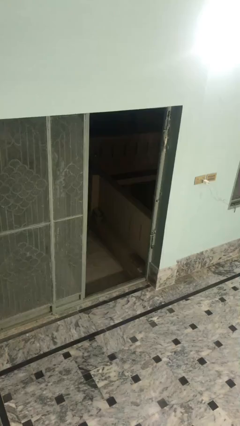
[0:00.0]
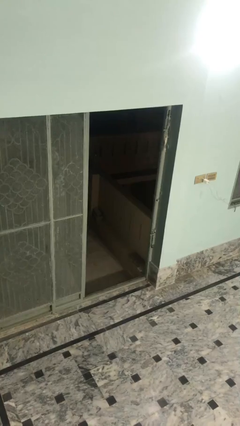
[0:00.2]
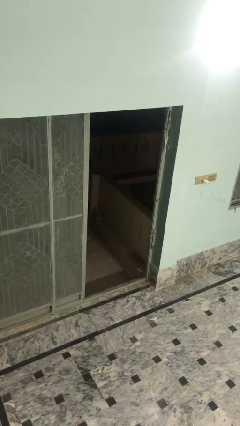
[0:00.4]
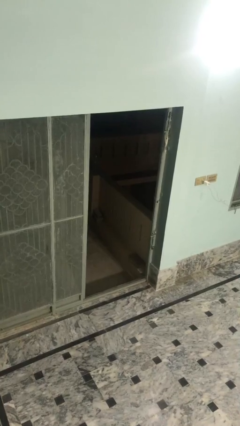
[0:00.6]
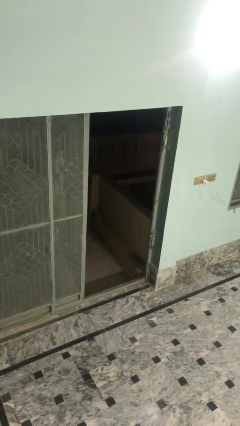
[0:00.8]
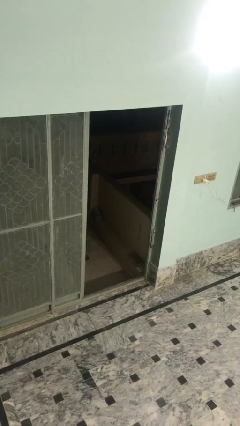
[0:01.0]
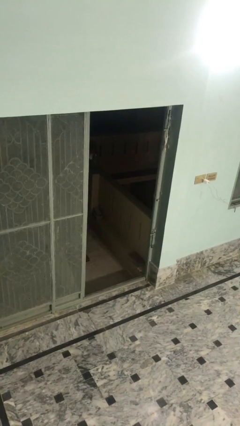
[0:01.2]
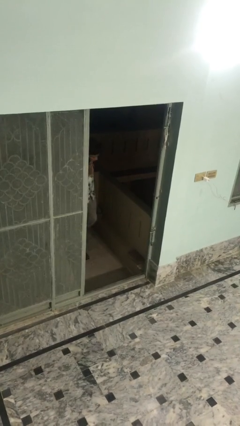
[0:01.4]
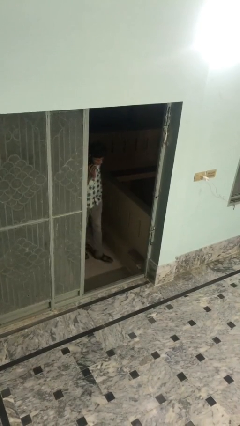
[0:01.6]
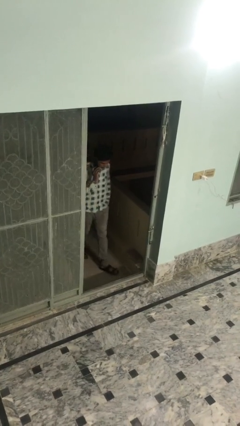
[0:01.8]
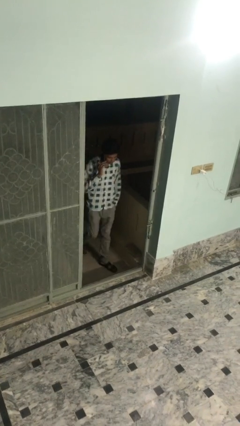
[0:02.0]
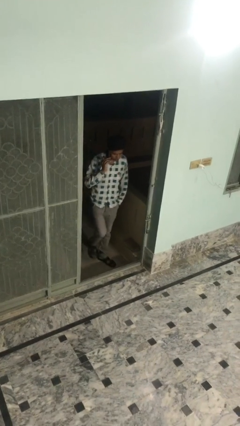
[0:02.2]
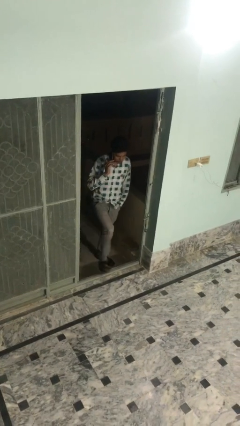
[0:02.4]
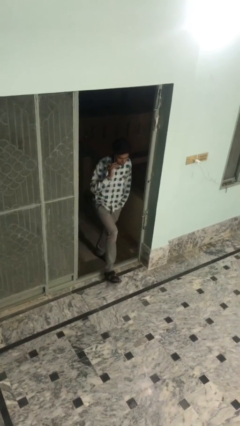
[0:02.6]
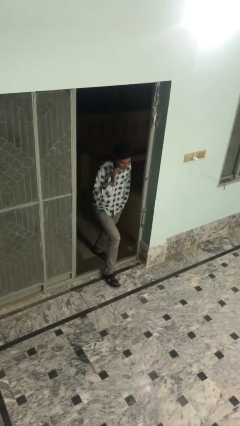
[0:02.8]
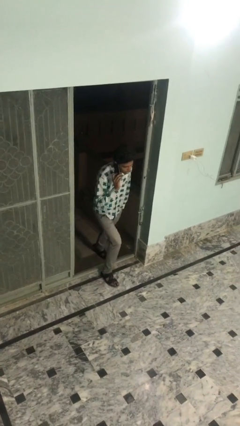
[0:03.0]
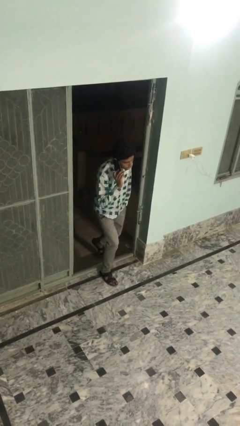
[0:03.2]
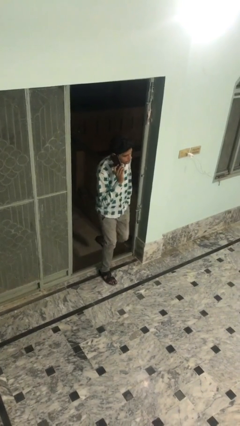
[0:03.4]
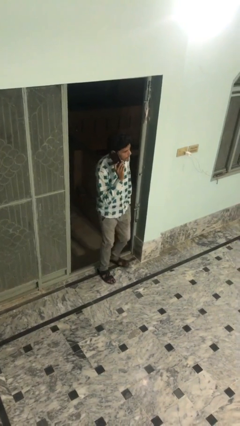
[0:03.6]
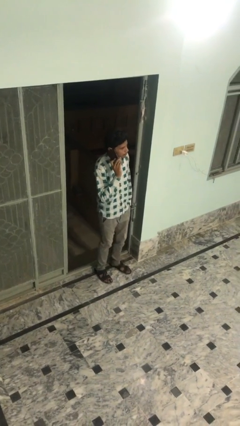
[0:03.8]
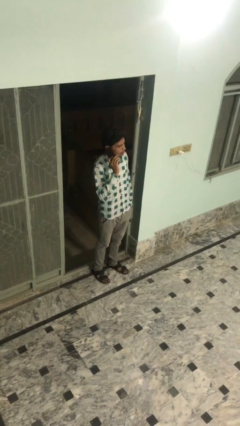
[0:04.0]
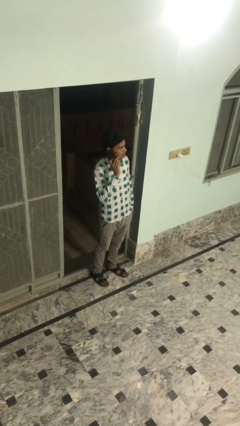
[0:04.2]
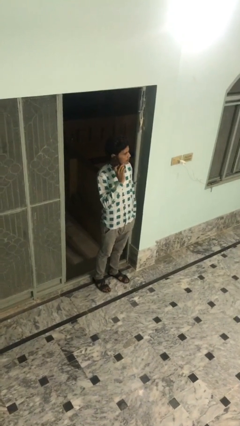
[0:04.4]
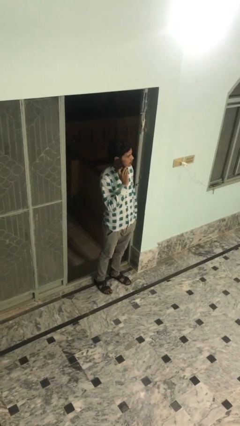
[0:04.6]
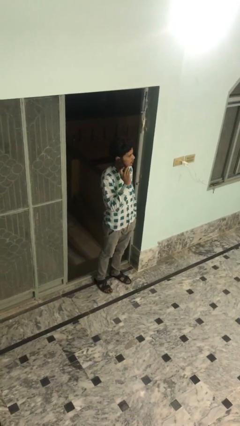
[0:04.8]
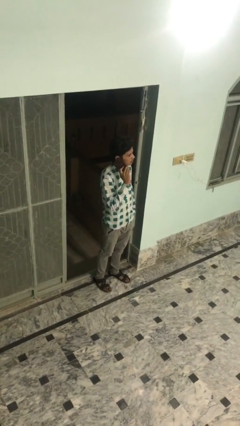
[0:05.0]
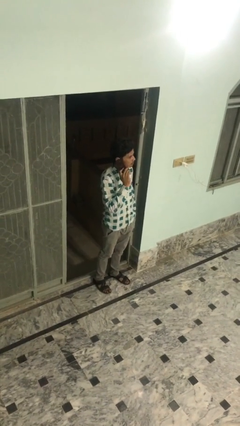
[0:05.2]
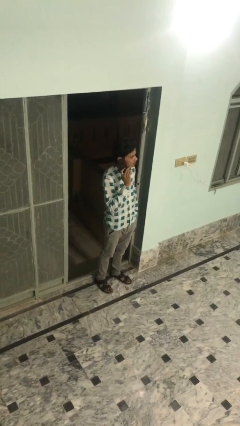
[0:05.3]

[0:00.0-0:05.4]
person enters scene through structure

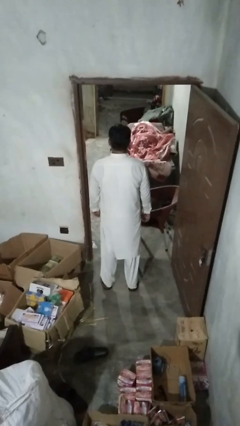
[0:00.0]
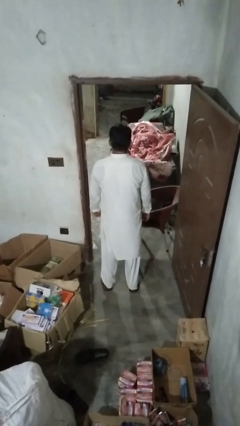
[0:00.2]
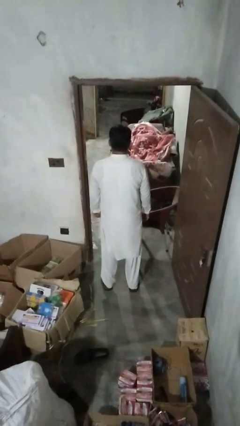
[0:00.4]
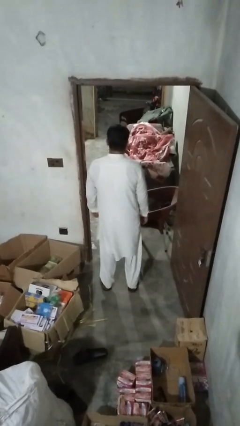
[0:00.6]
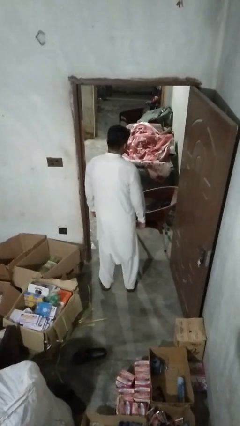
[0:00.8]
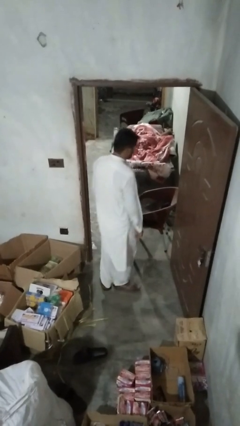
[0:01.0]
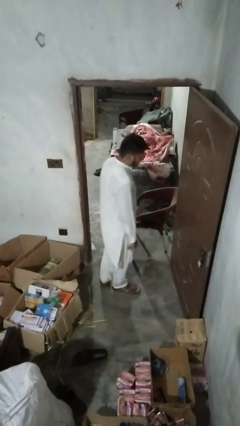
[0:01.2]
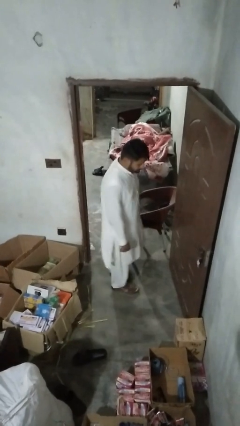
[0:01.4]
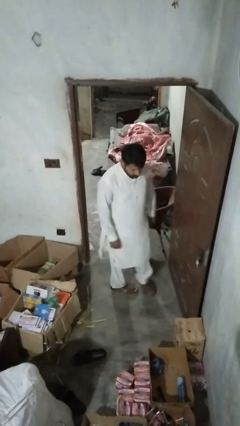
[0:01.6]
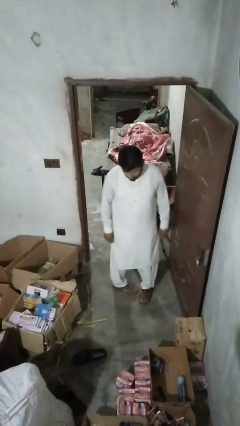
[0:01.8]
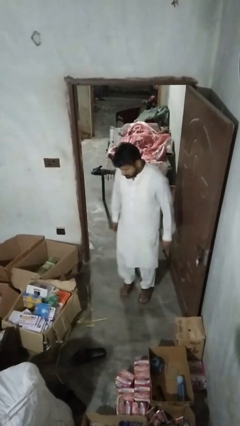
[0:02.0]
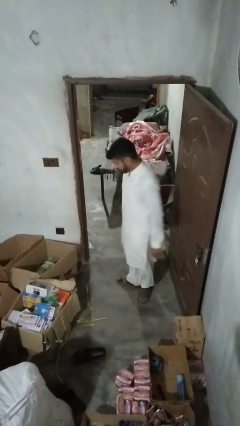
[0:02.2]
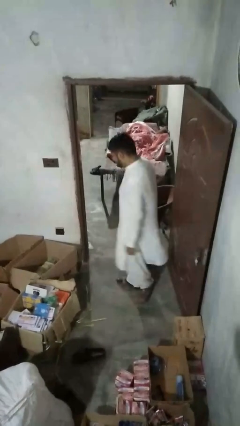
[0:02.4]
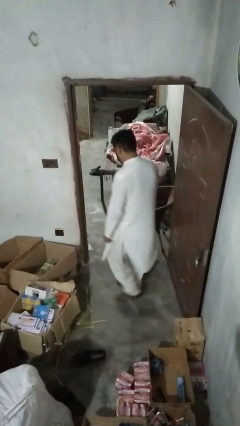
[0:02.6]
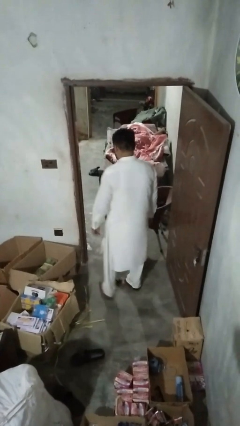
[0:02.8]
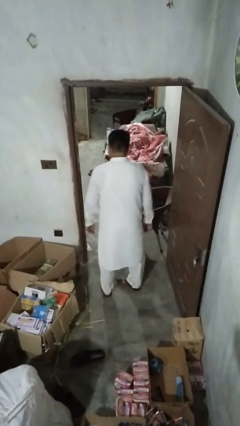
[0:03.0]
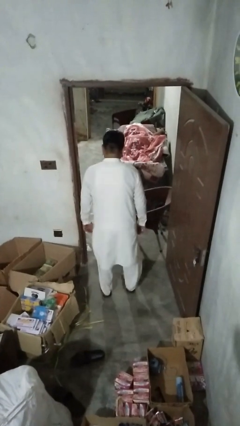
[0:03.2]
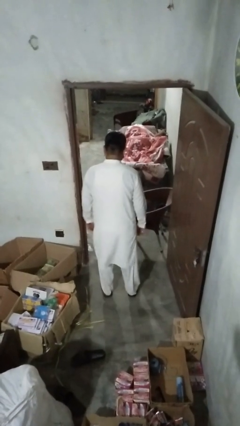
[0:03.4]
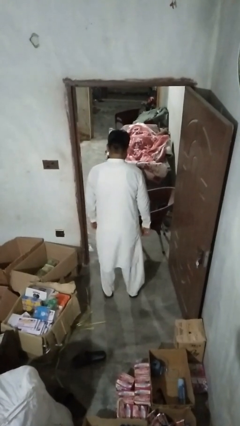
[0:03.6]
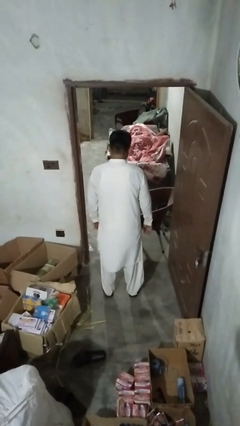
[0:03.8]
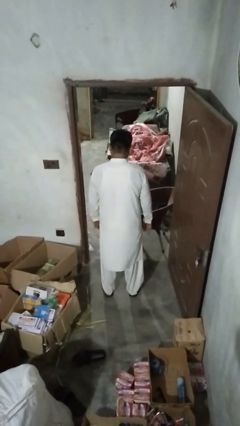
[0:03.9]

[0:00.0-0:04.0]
person twirls

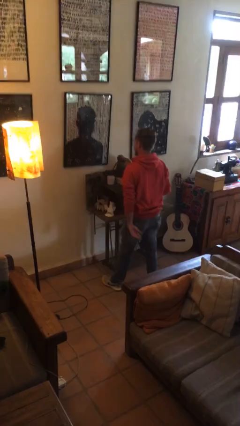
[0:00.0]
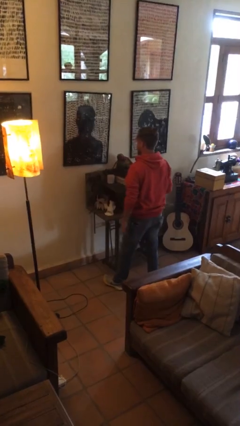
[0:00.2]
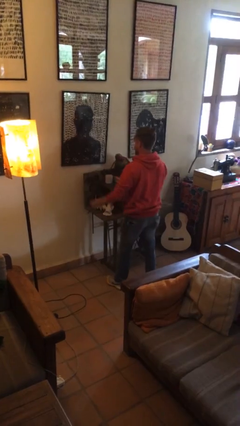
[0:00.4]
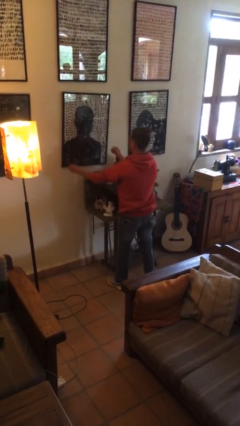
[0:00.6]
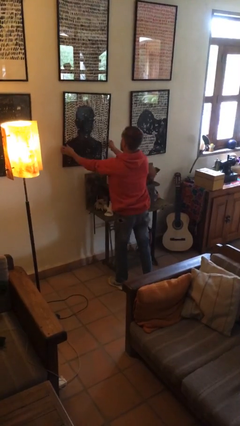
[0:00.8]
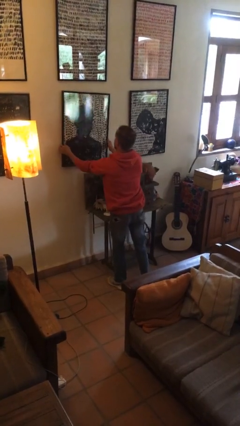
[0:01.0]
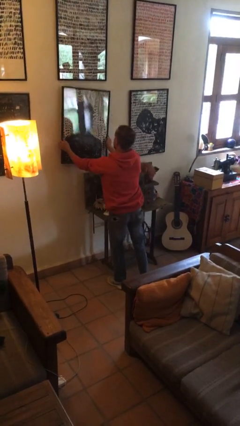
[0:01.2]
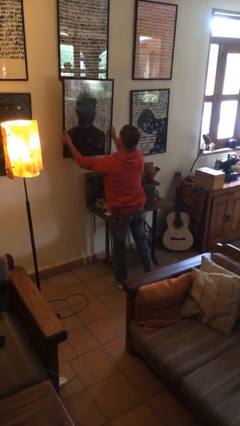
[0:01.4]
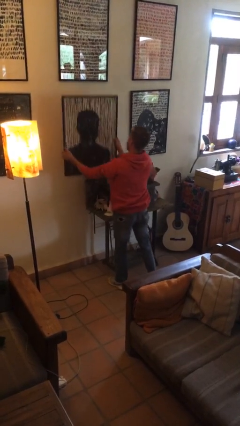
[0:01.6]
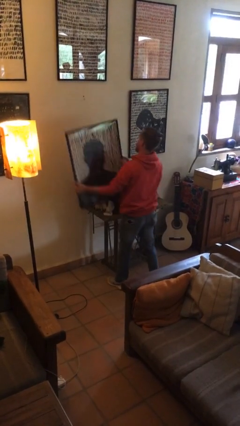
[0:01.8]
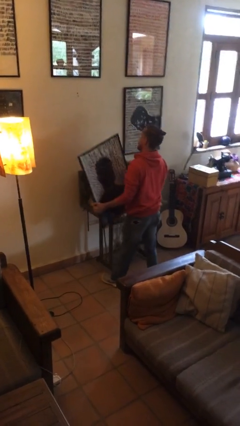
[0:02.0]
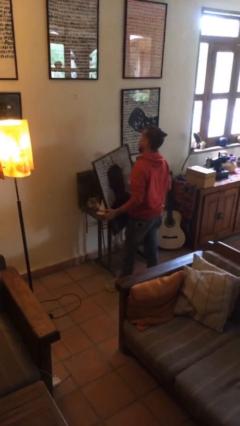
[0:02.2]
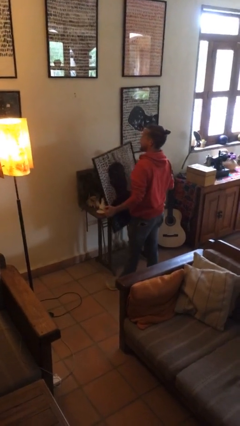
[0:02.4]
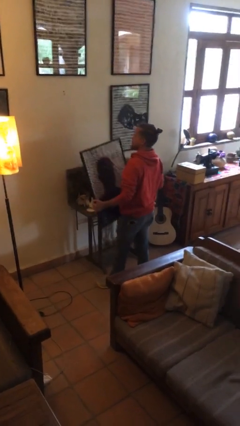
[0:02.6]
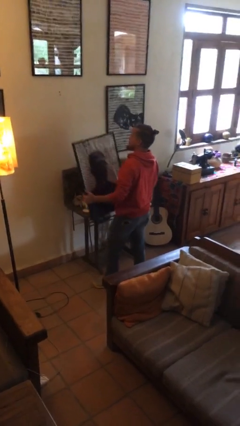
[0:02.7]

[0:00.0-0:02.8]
person takes down picture frame

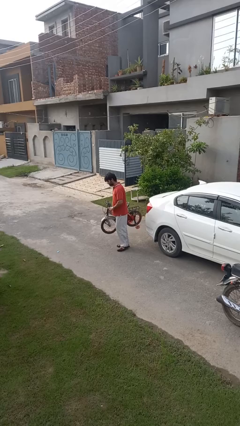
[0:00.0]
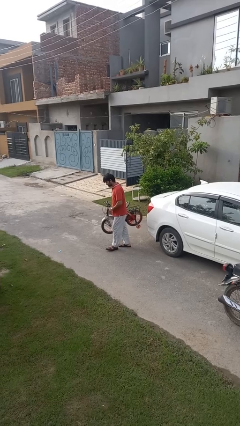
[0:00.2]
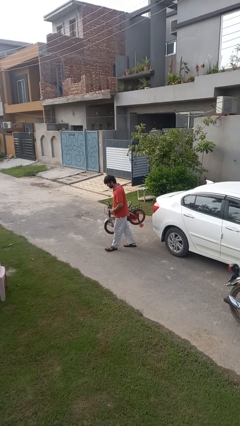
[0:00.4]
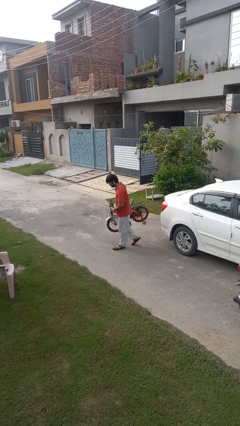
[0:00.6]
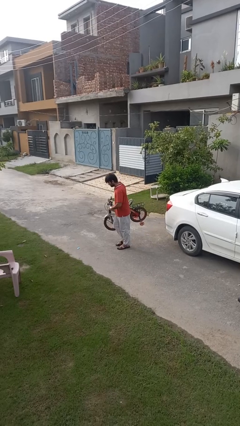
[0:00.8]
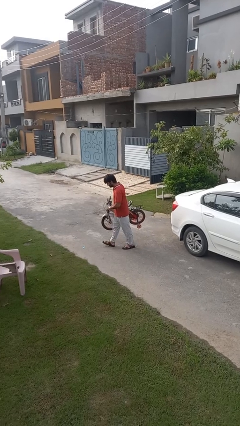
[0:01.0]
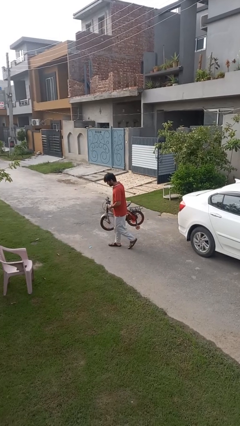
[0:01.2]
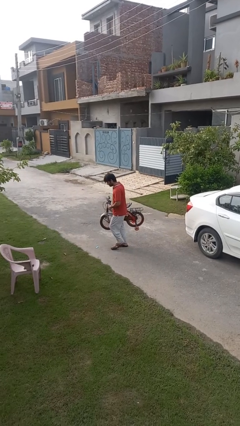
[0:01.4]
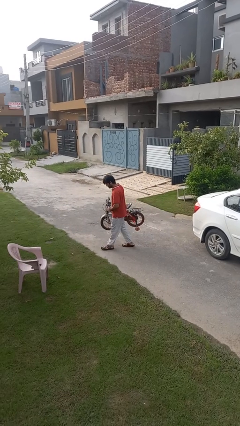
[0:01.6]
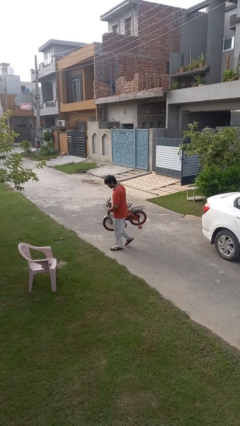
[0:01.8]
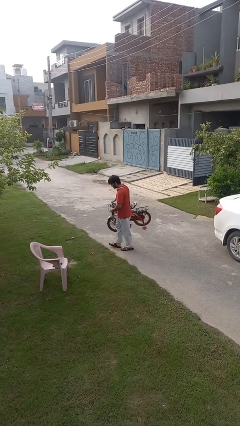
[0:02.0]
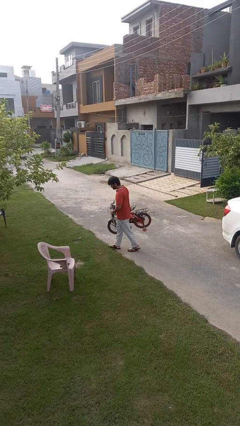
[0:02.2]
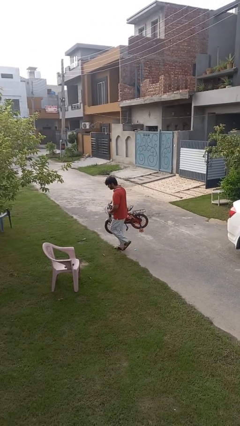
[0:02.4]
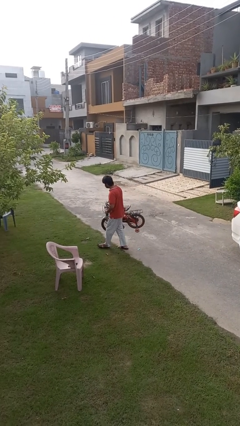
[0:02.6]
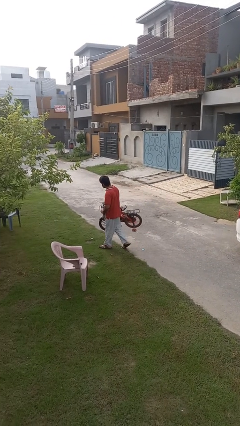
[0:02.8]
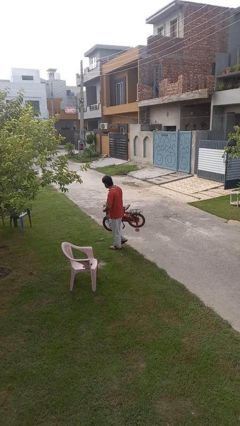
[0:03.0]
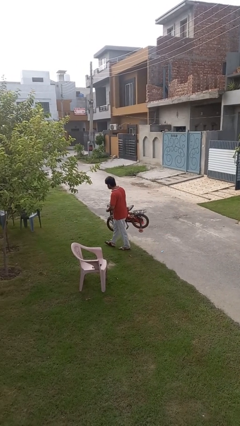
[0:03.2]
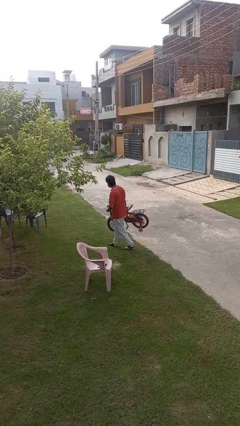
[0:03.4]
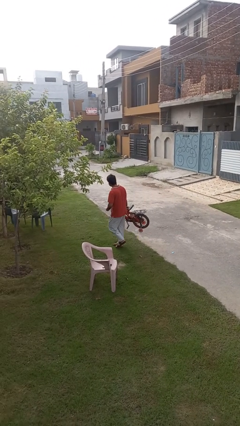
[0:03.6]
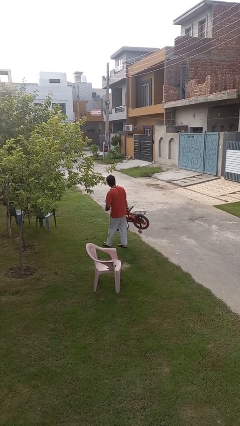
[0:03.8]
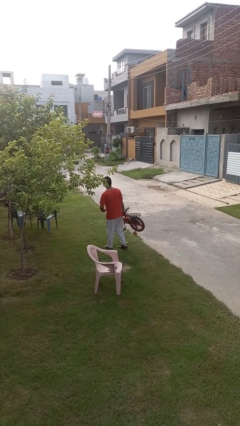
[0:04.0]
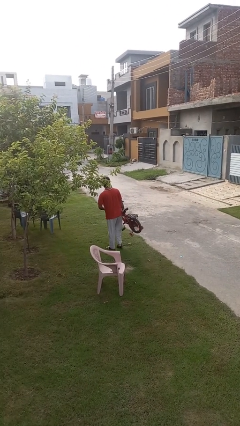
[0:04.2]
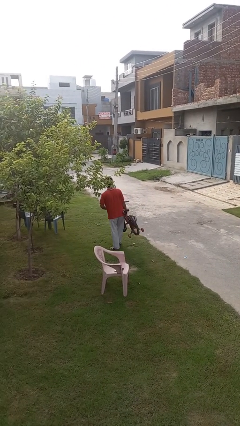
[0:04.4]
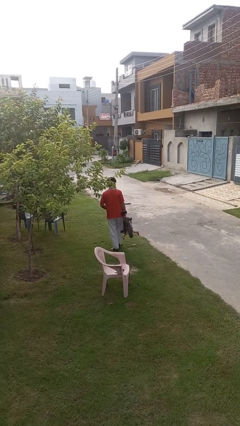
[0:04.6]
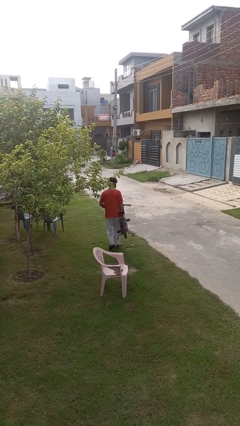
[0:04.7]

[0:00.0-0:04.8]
person carries bicycle

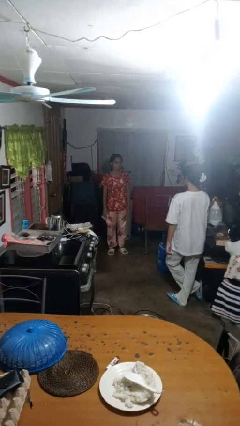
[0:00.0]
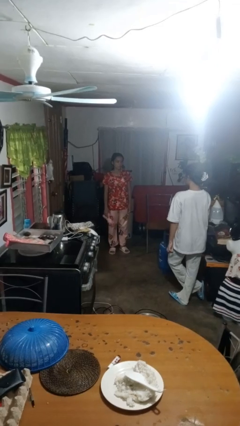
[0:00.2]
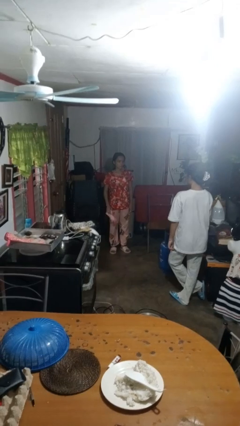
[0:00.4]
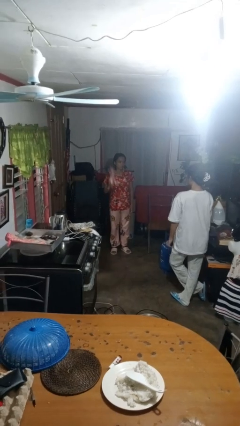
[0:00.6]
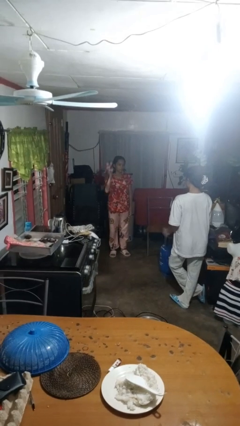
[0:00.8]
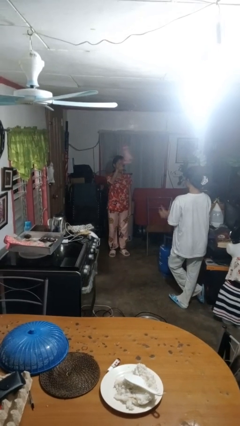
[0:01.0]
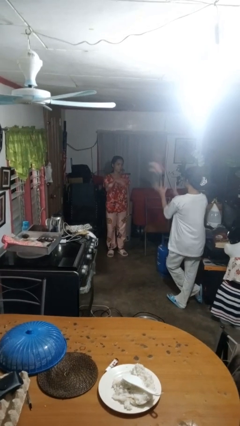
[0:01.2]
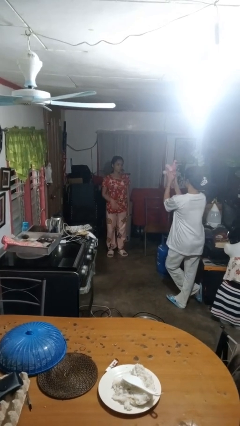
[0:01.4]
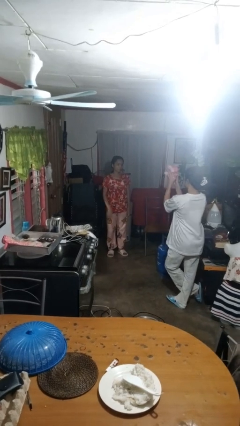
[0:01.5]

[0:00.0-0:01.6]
person throws object to person
